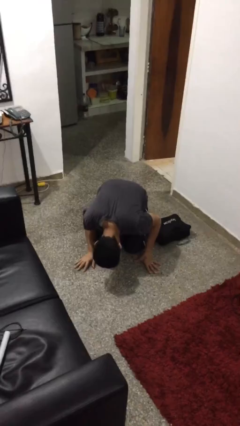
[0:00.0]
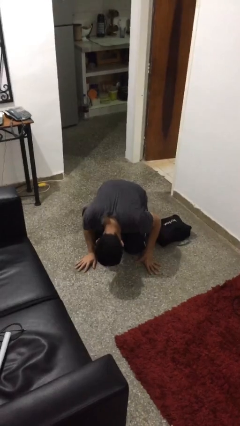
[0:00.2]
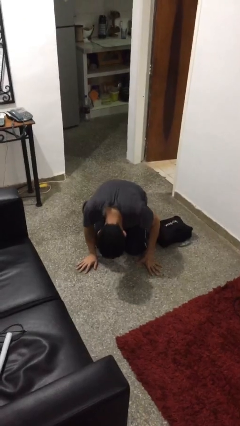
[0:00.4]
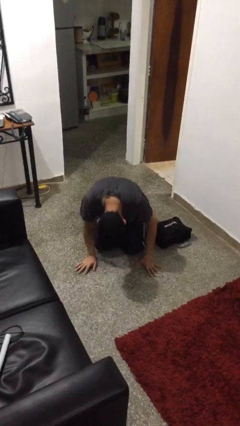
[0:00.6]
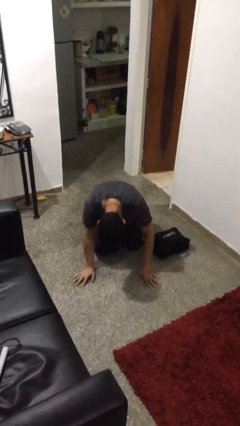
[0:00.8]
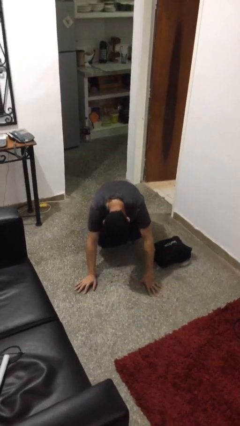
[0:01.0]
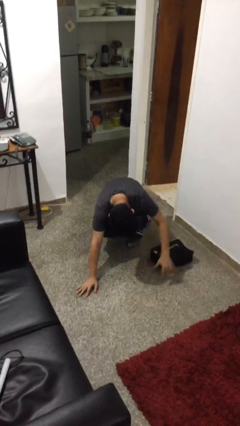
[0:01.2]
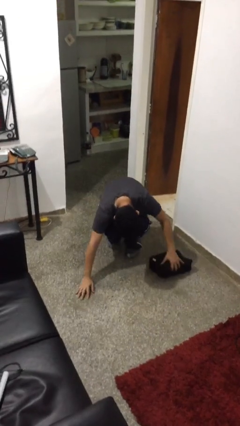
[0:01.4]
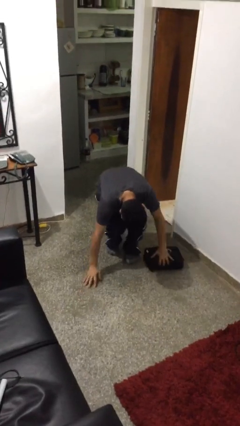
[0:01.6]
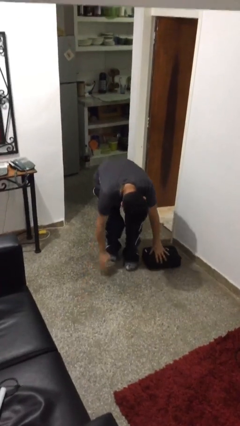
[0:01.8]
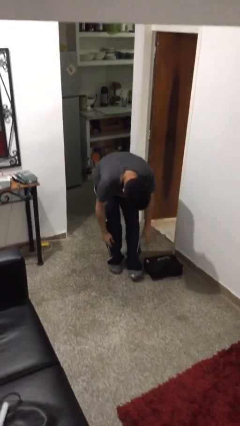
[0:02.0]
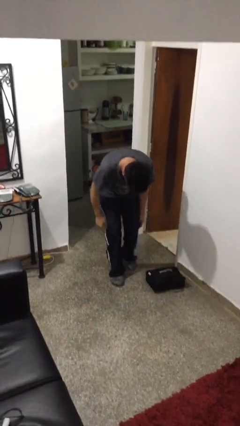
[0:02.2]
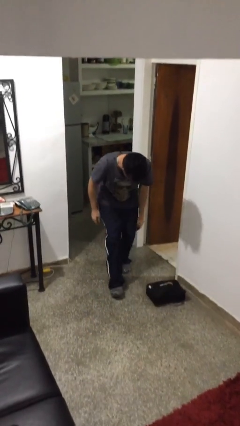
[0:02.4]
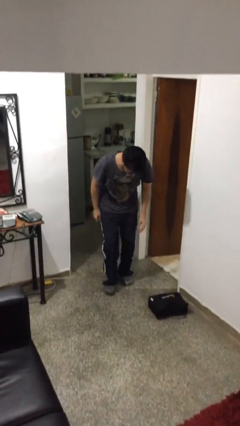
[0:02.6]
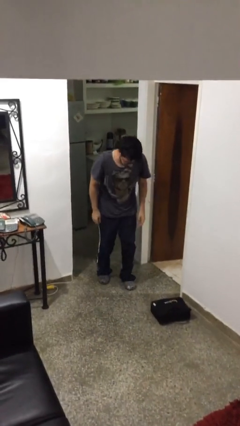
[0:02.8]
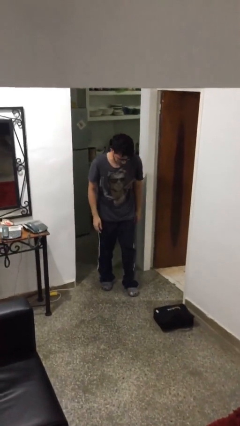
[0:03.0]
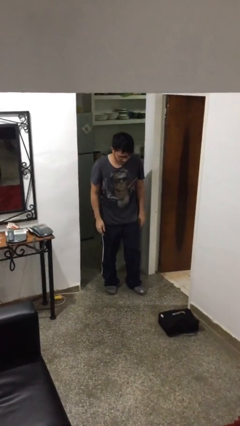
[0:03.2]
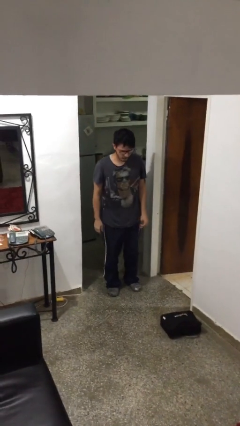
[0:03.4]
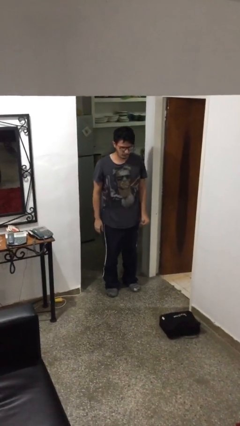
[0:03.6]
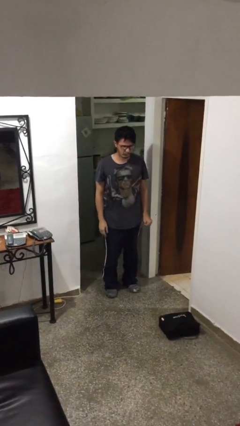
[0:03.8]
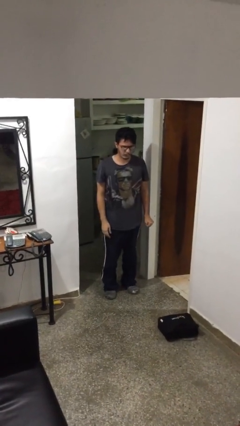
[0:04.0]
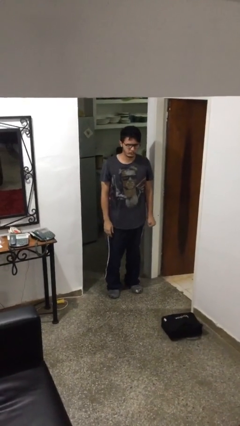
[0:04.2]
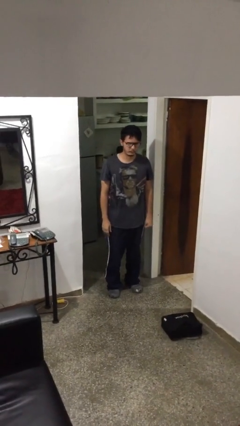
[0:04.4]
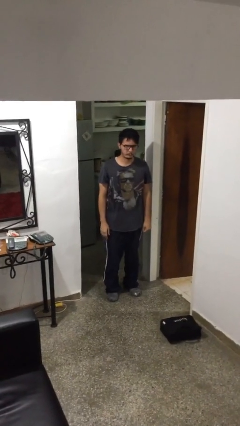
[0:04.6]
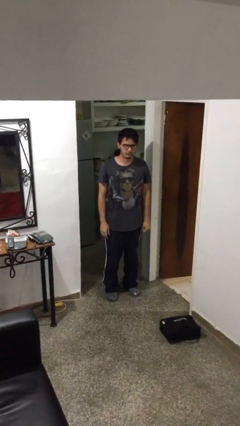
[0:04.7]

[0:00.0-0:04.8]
person stands up from floor

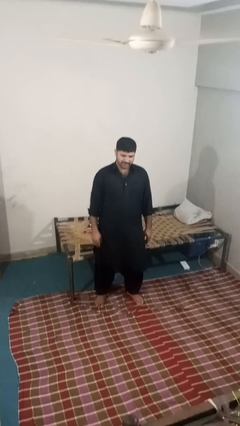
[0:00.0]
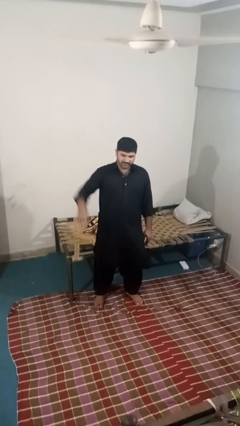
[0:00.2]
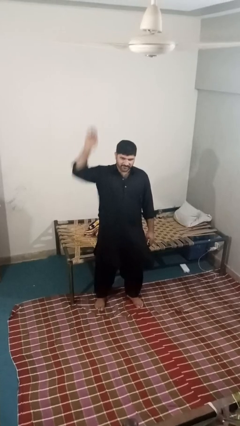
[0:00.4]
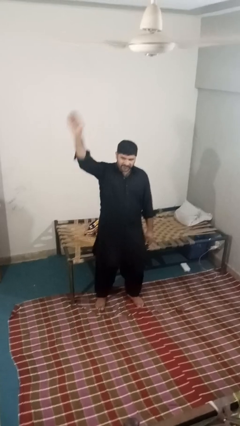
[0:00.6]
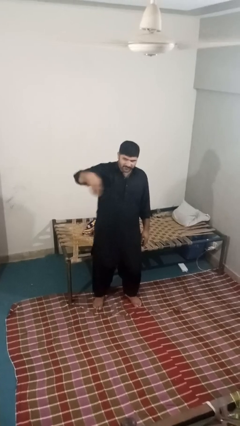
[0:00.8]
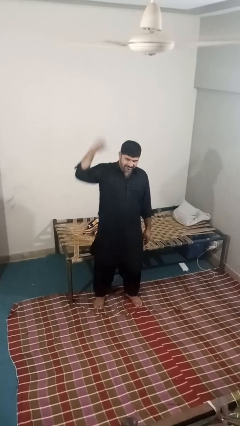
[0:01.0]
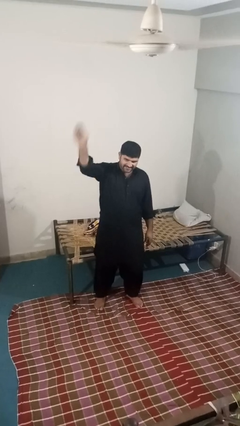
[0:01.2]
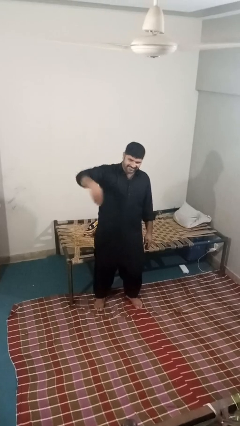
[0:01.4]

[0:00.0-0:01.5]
person gestures come here

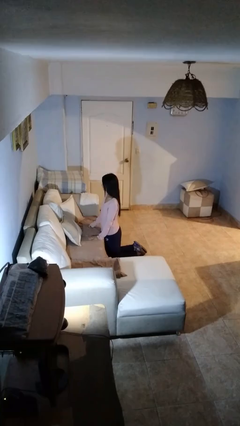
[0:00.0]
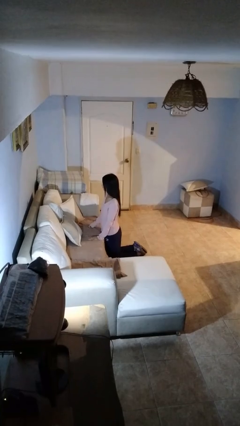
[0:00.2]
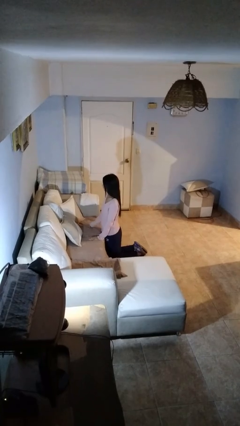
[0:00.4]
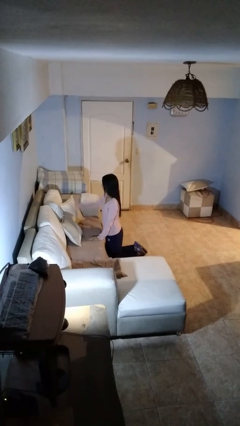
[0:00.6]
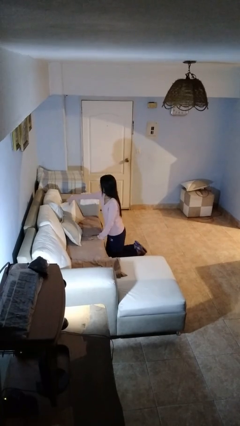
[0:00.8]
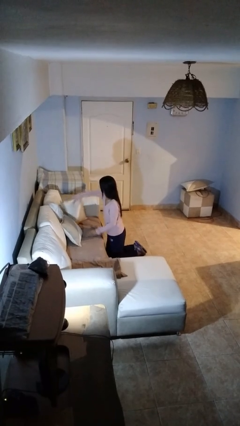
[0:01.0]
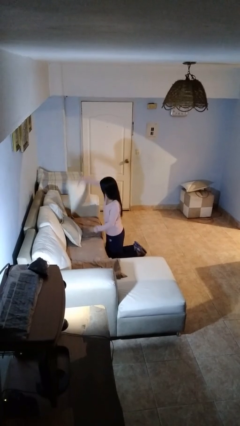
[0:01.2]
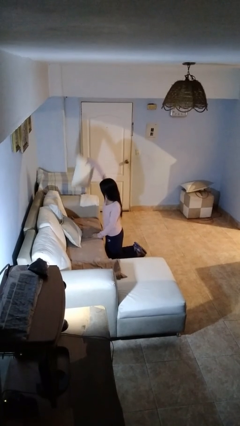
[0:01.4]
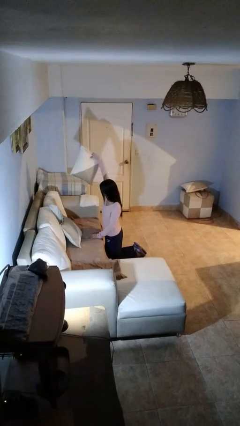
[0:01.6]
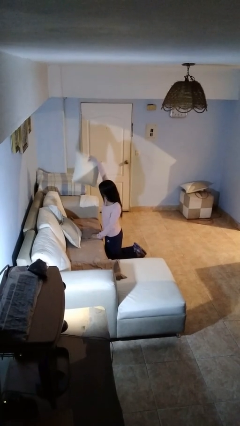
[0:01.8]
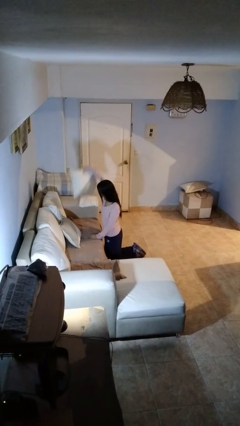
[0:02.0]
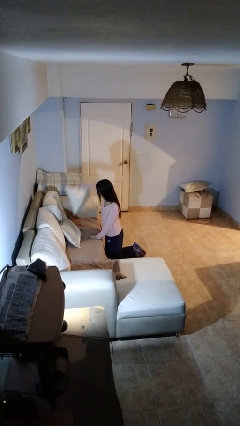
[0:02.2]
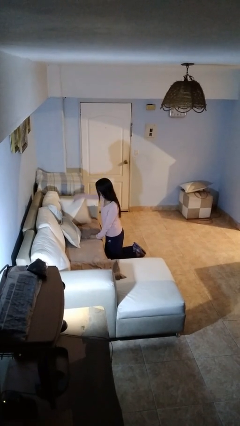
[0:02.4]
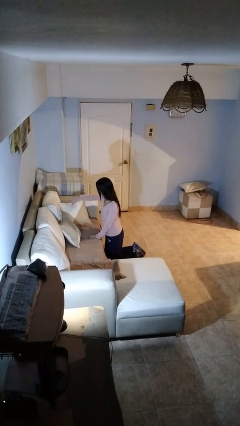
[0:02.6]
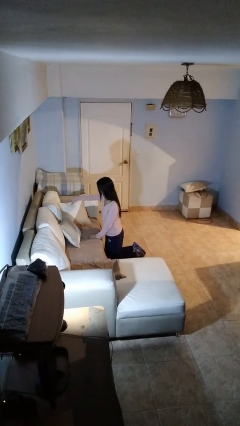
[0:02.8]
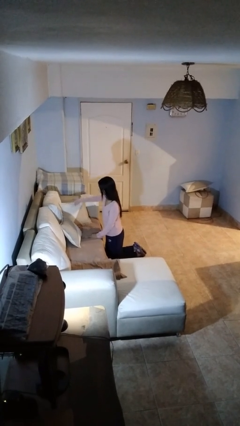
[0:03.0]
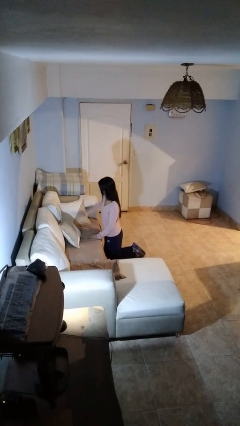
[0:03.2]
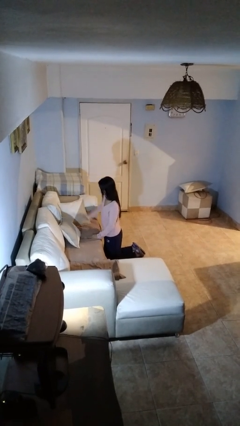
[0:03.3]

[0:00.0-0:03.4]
person searches in couch

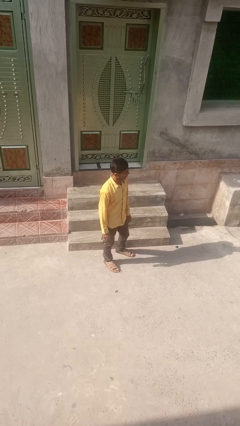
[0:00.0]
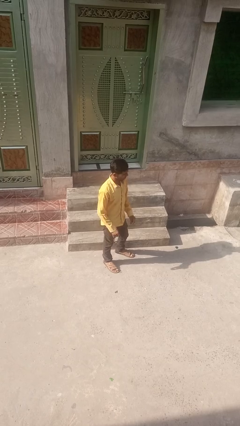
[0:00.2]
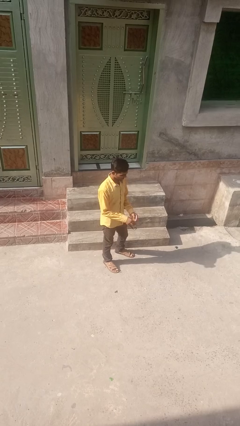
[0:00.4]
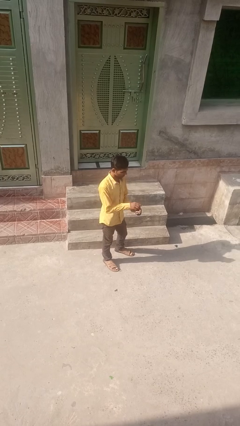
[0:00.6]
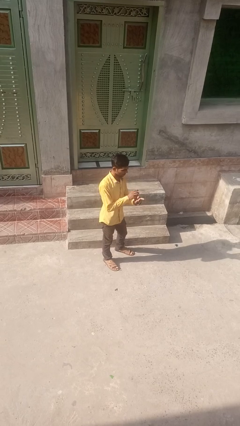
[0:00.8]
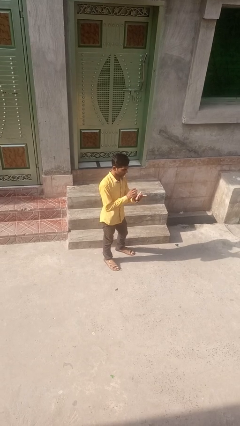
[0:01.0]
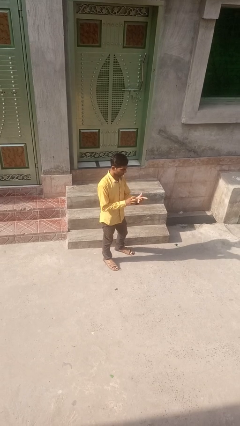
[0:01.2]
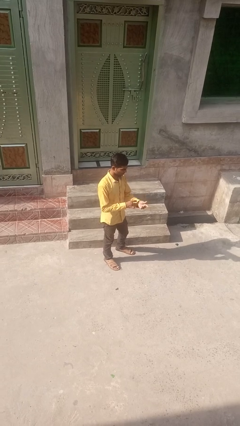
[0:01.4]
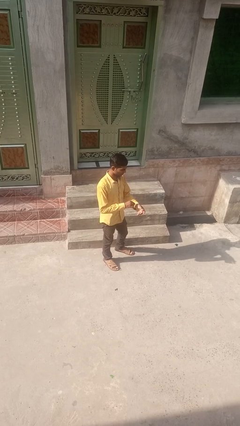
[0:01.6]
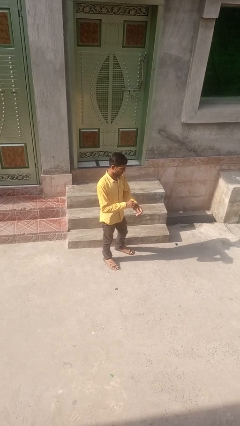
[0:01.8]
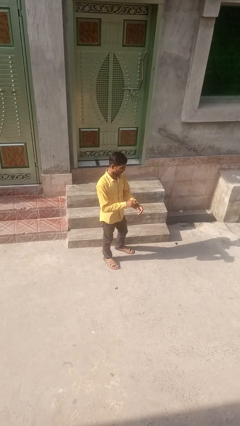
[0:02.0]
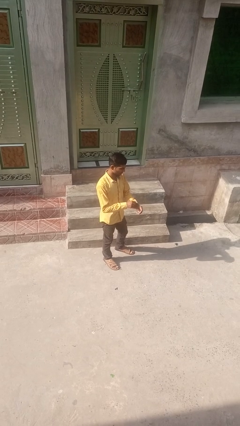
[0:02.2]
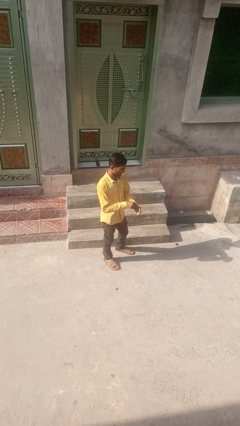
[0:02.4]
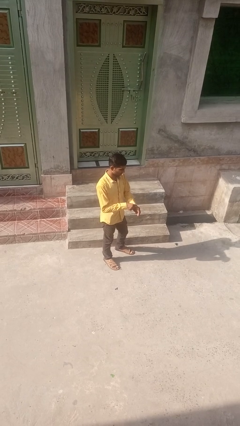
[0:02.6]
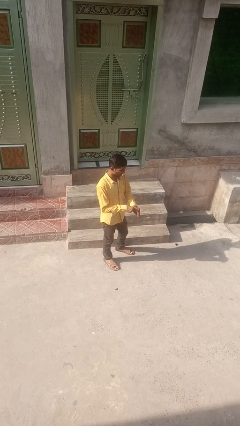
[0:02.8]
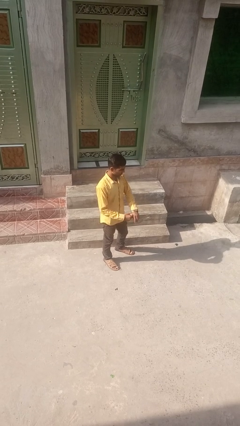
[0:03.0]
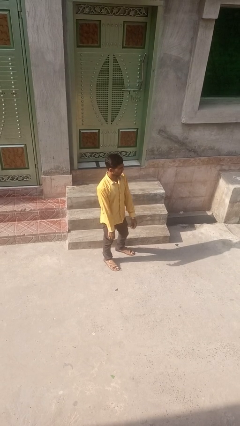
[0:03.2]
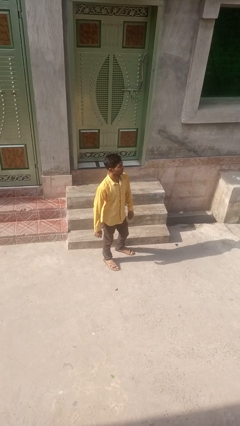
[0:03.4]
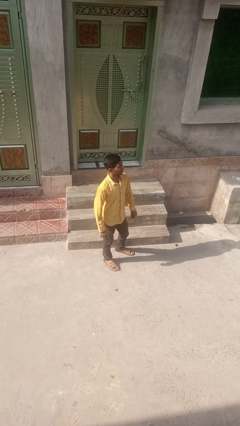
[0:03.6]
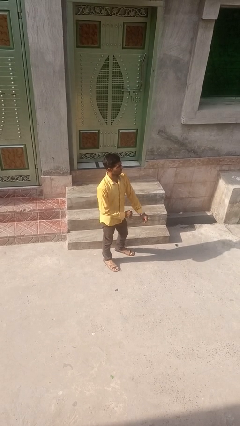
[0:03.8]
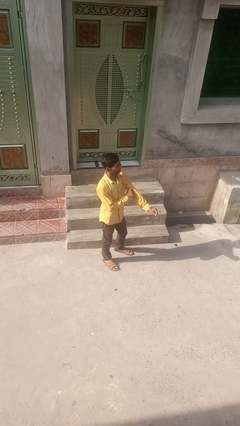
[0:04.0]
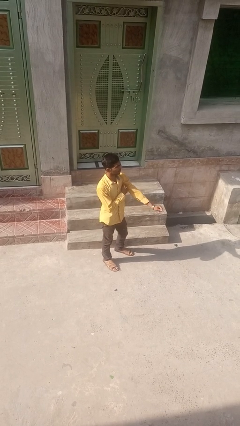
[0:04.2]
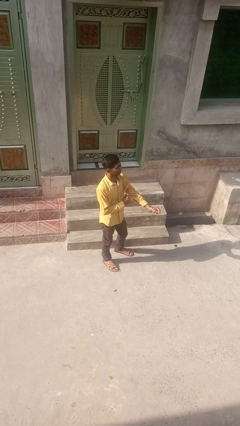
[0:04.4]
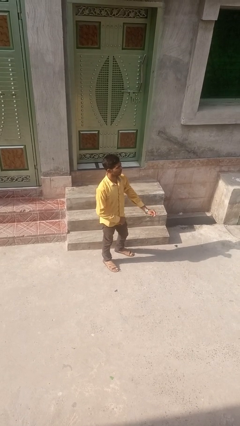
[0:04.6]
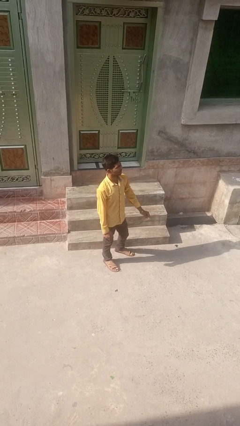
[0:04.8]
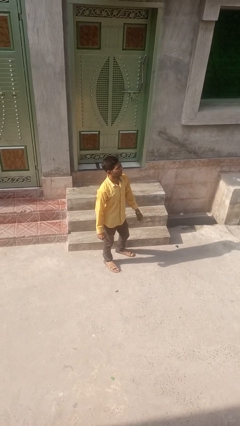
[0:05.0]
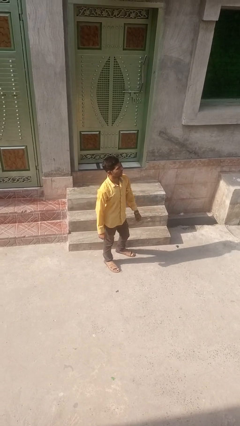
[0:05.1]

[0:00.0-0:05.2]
person puts on wristwatch

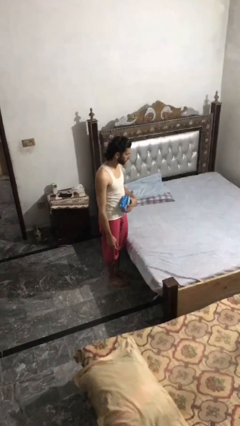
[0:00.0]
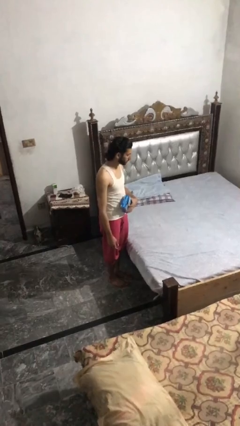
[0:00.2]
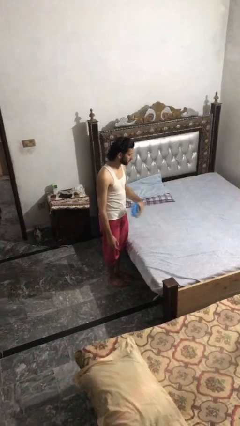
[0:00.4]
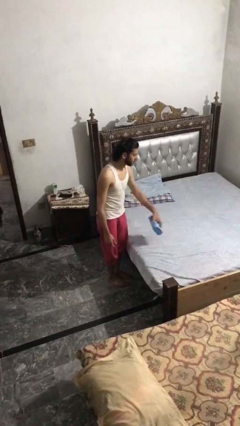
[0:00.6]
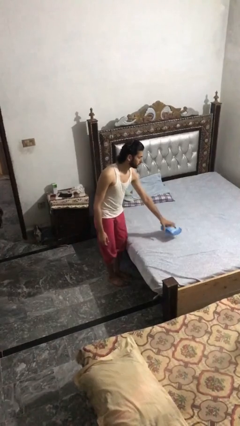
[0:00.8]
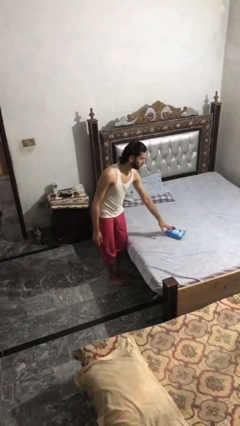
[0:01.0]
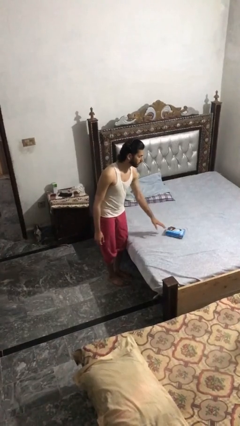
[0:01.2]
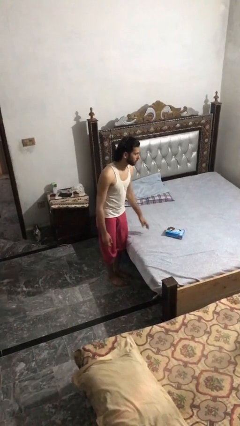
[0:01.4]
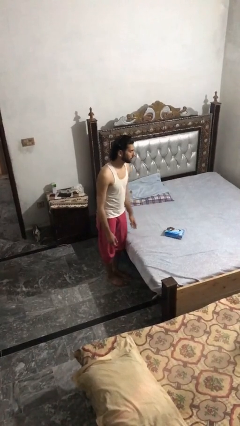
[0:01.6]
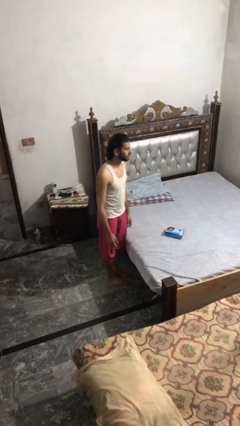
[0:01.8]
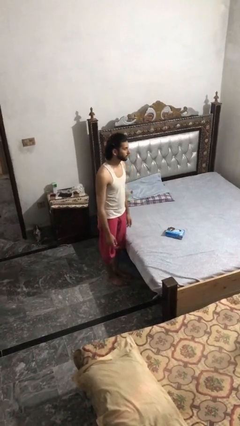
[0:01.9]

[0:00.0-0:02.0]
person puts down object on bed

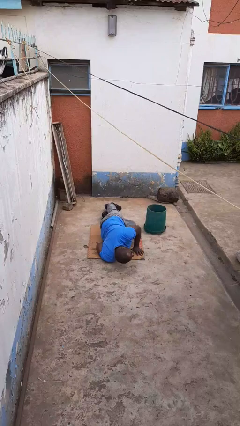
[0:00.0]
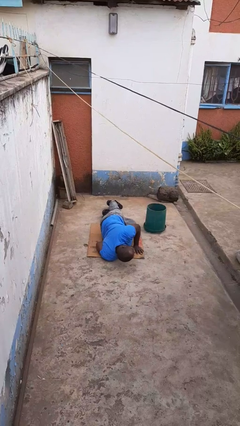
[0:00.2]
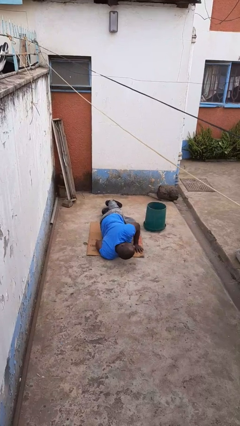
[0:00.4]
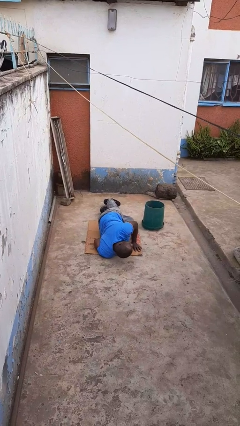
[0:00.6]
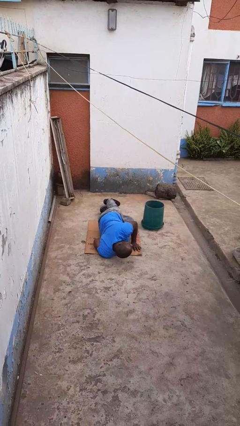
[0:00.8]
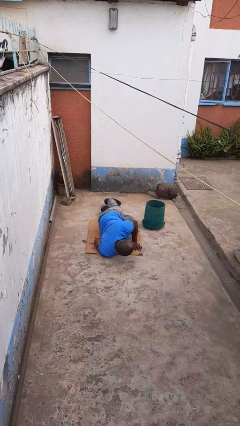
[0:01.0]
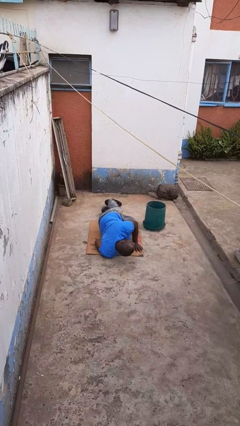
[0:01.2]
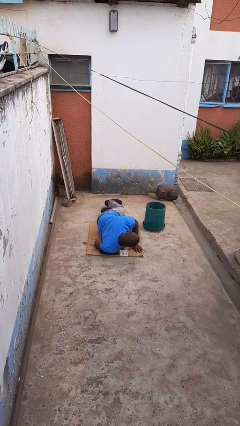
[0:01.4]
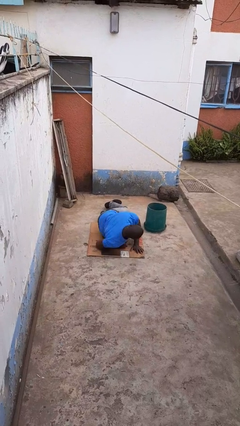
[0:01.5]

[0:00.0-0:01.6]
person lies down on floor
